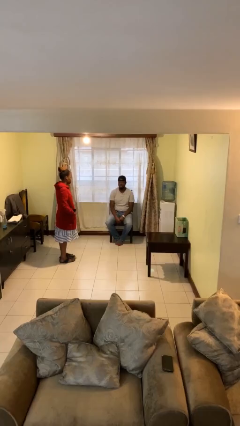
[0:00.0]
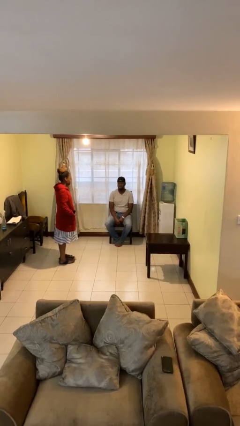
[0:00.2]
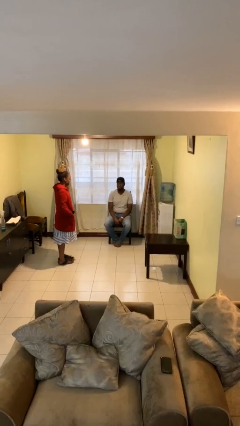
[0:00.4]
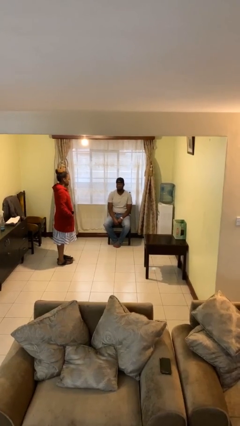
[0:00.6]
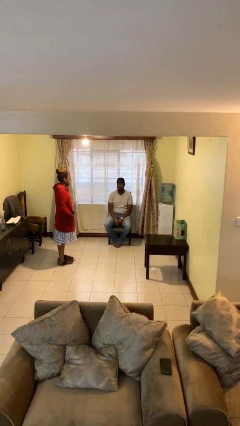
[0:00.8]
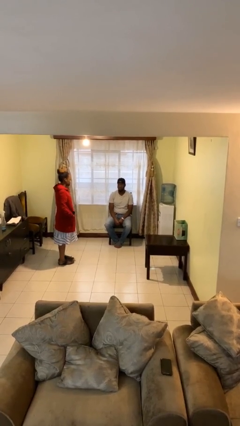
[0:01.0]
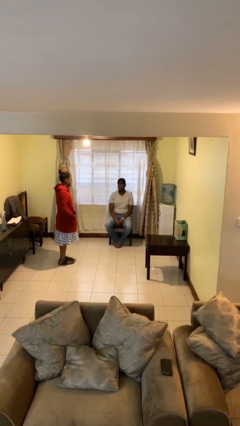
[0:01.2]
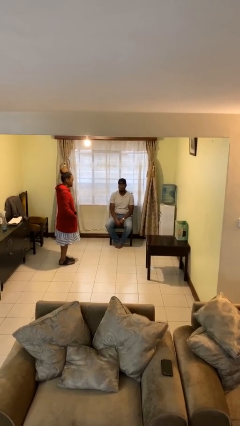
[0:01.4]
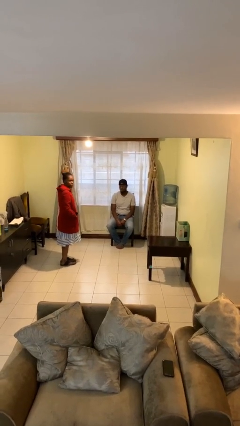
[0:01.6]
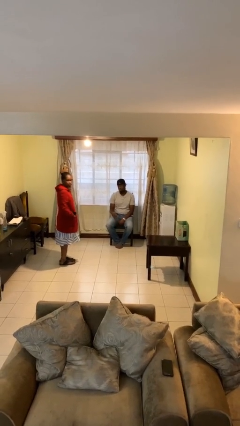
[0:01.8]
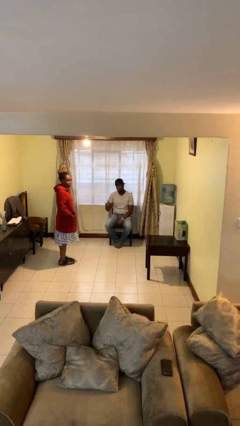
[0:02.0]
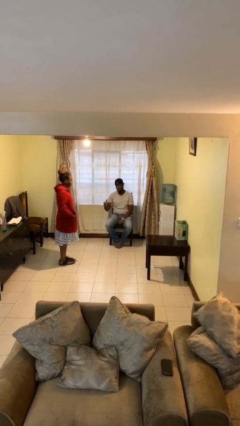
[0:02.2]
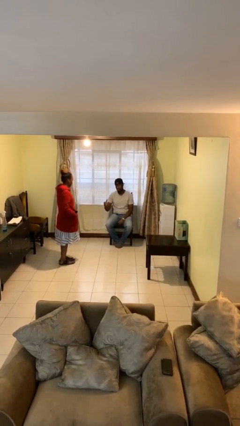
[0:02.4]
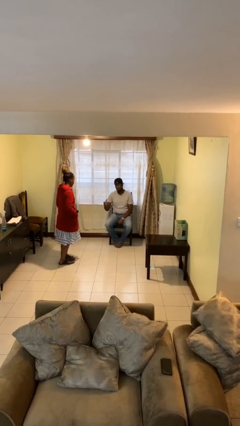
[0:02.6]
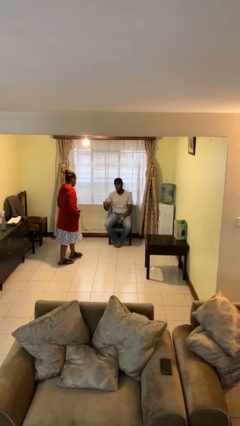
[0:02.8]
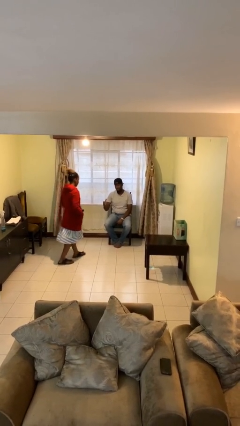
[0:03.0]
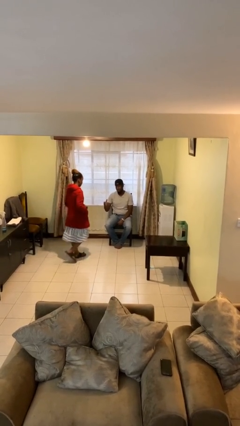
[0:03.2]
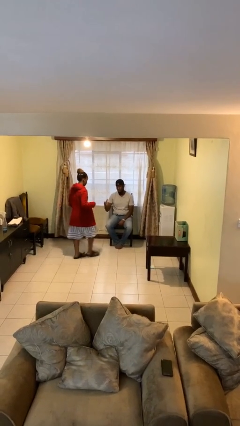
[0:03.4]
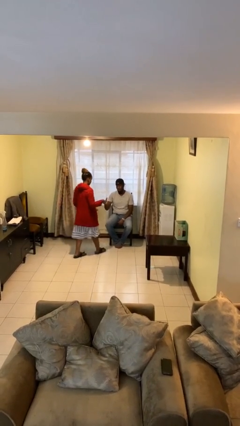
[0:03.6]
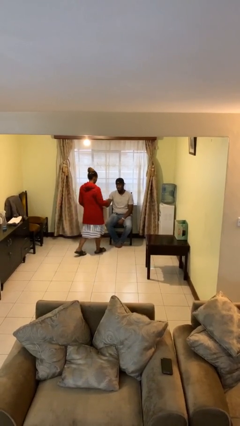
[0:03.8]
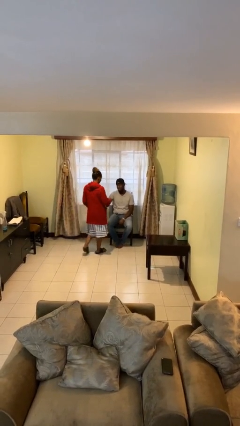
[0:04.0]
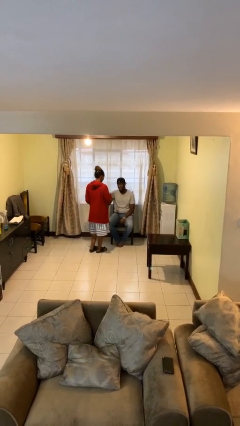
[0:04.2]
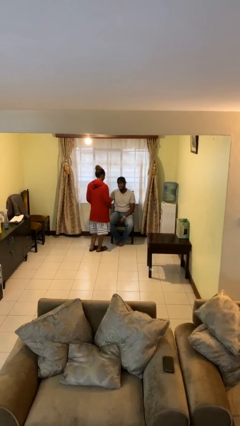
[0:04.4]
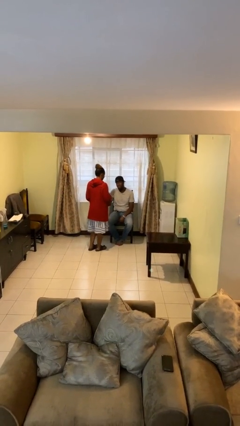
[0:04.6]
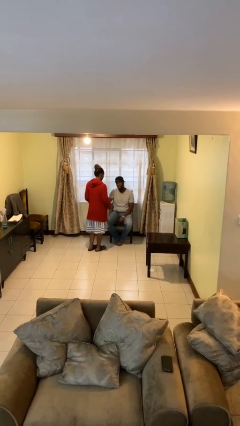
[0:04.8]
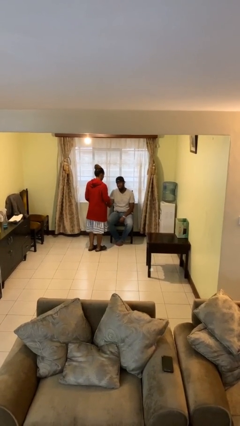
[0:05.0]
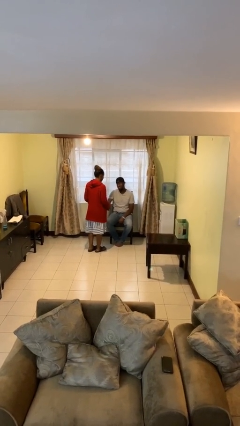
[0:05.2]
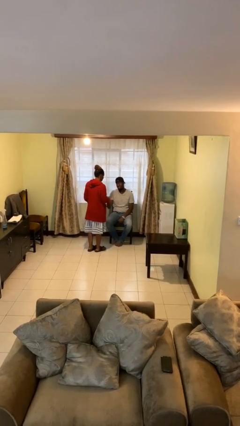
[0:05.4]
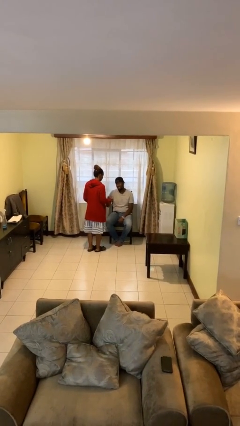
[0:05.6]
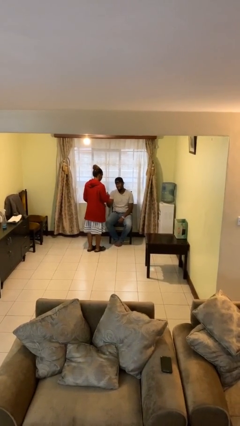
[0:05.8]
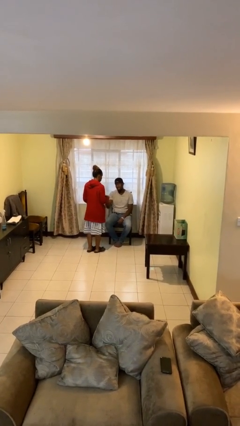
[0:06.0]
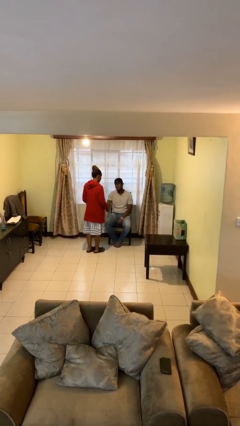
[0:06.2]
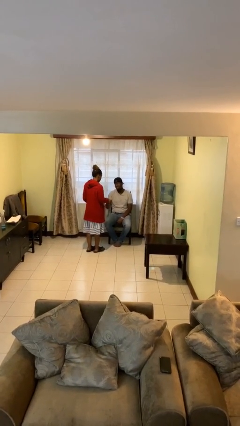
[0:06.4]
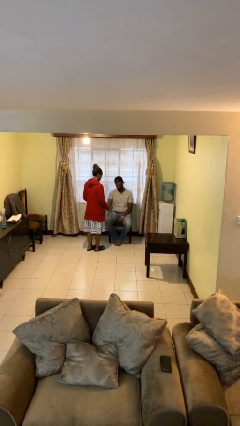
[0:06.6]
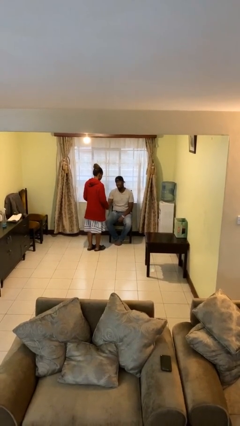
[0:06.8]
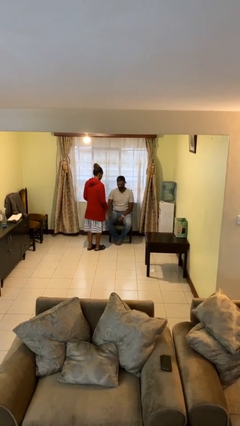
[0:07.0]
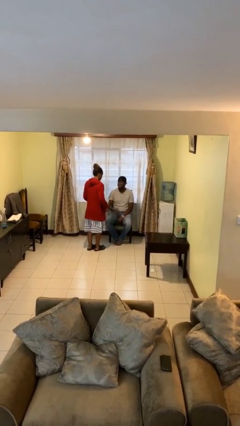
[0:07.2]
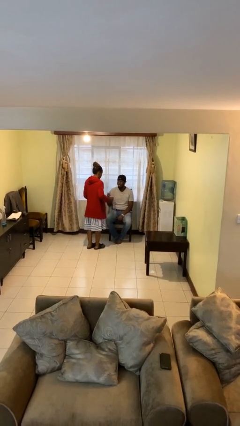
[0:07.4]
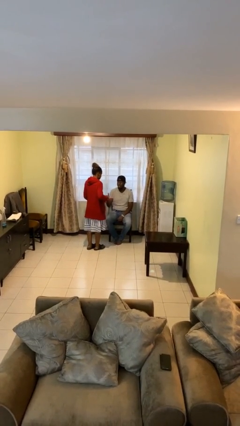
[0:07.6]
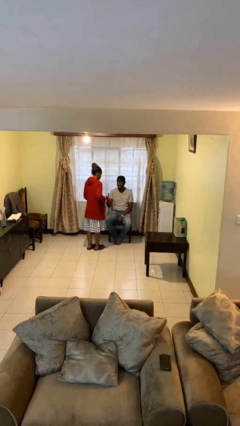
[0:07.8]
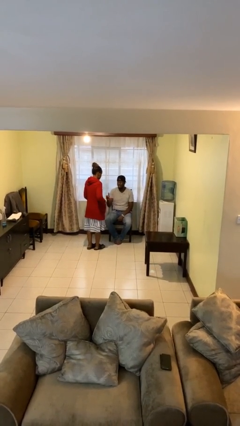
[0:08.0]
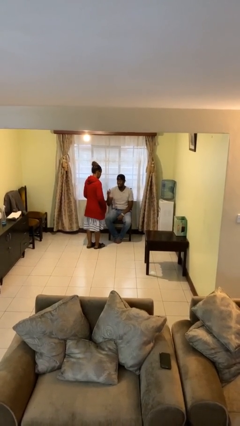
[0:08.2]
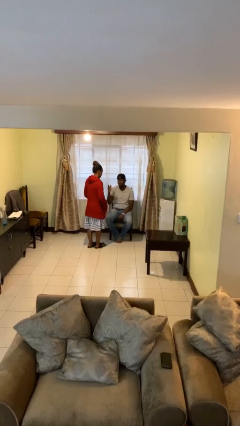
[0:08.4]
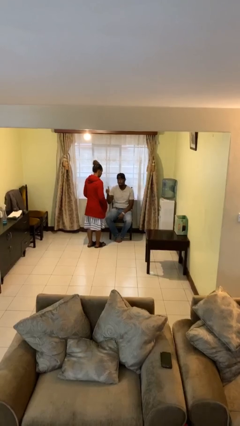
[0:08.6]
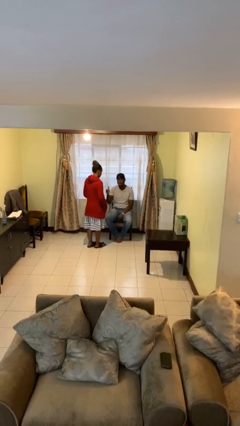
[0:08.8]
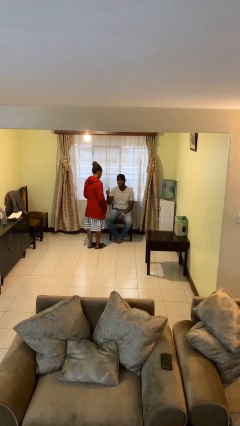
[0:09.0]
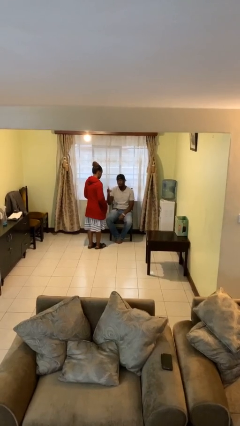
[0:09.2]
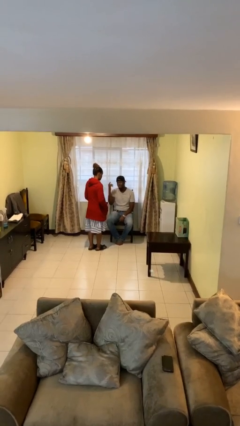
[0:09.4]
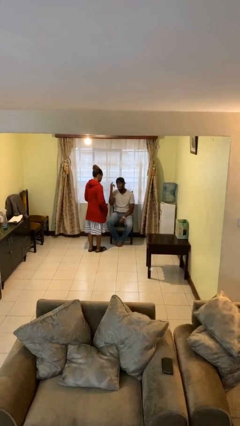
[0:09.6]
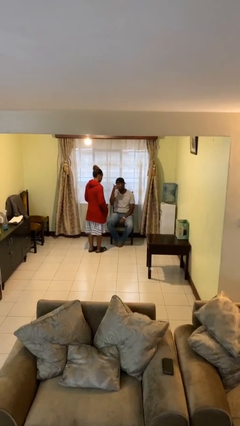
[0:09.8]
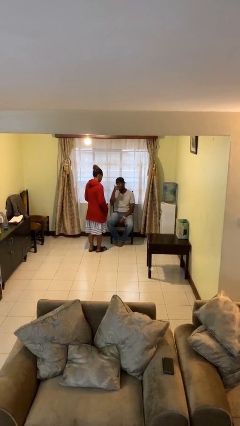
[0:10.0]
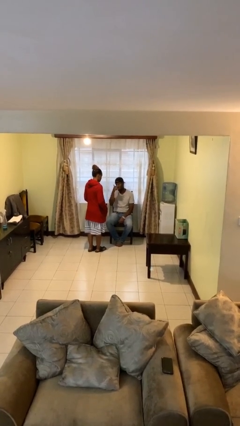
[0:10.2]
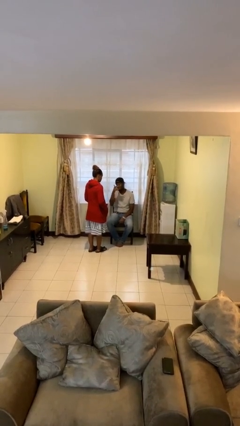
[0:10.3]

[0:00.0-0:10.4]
person shakes hand

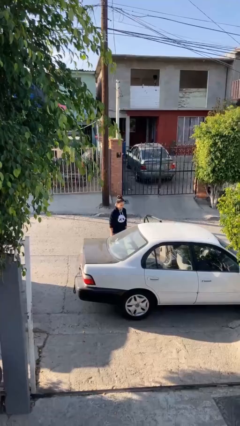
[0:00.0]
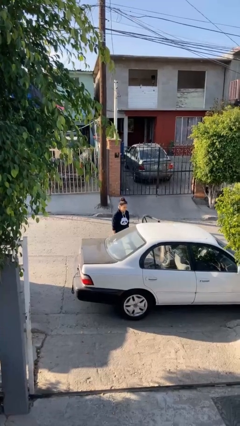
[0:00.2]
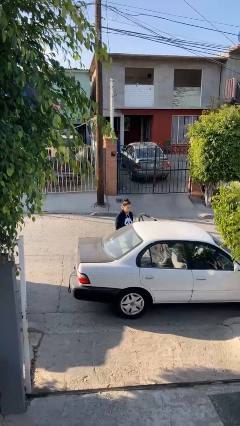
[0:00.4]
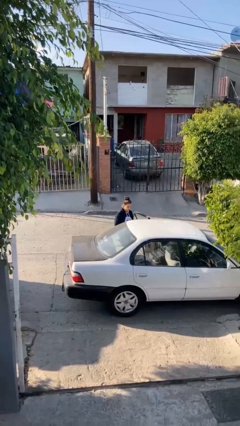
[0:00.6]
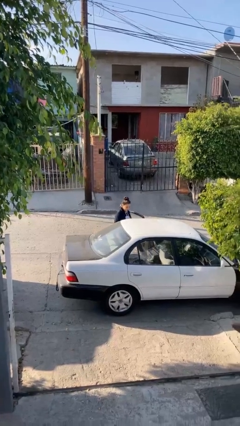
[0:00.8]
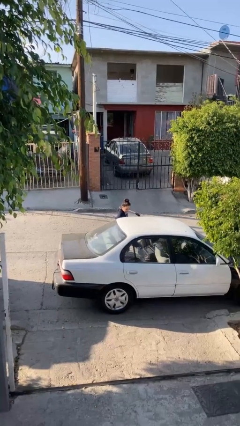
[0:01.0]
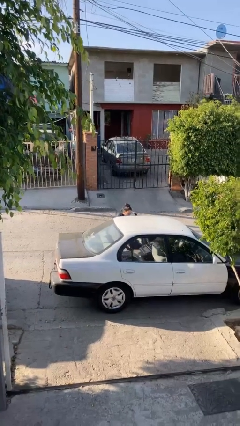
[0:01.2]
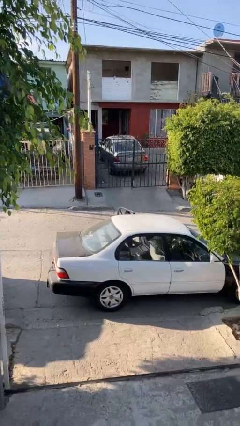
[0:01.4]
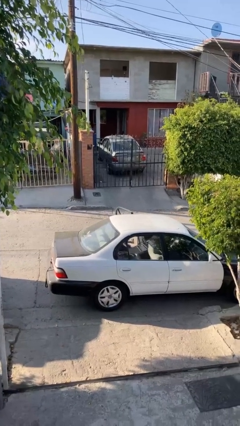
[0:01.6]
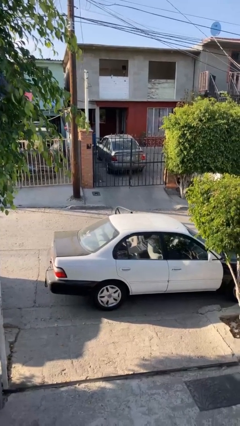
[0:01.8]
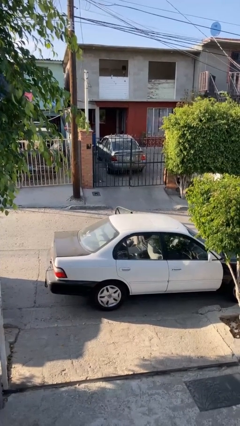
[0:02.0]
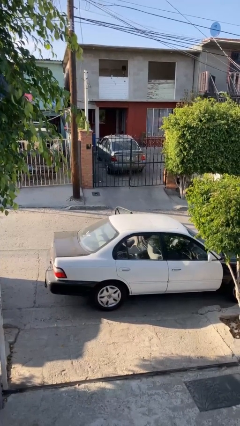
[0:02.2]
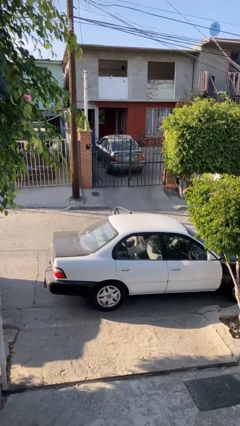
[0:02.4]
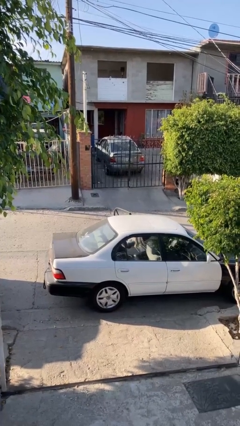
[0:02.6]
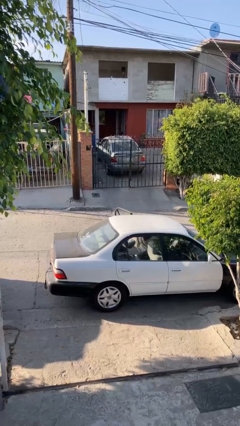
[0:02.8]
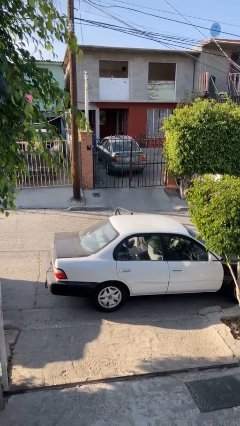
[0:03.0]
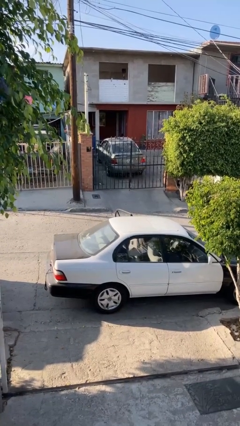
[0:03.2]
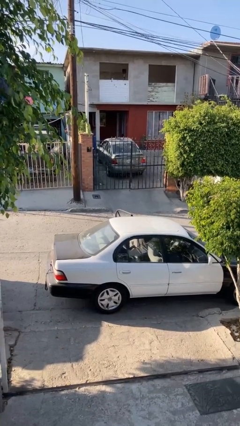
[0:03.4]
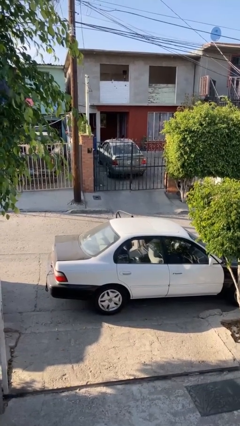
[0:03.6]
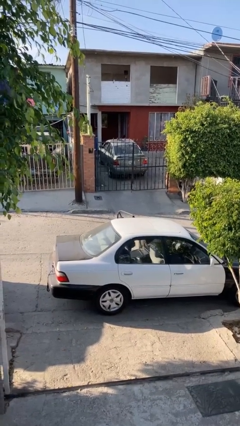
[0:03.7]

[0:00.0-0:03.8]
person enters car

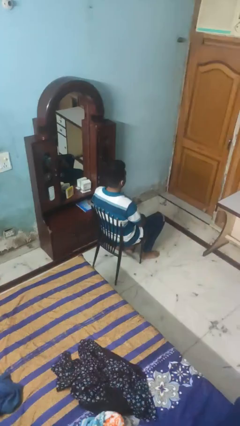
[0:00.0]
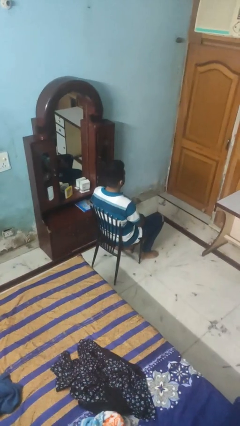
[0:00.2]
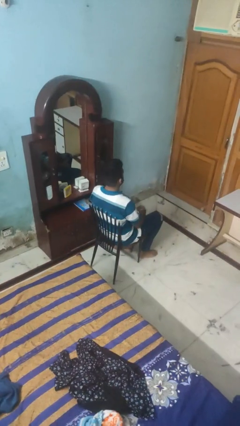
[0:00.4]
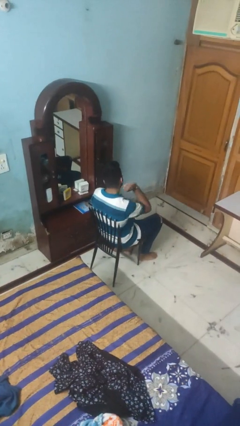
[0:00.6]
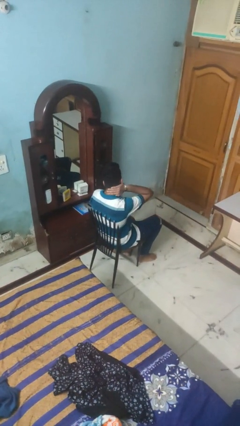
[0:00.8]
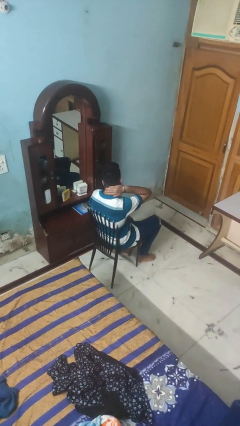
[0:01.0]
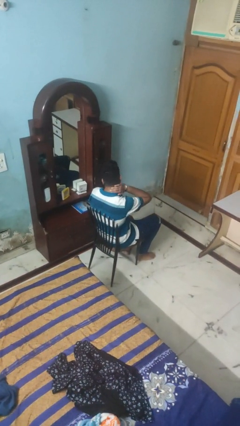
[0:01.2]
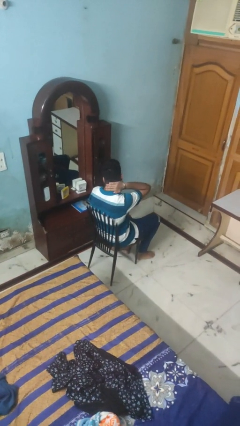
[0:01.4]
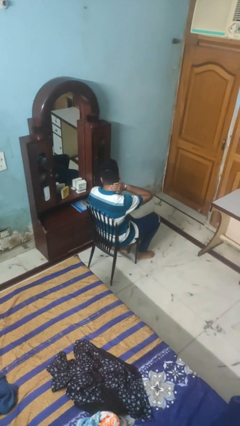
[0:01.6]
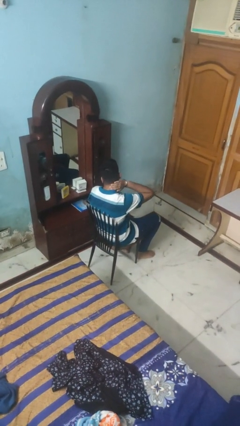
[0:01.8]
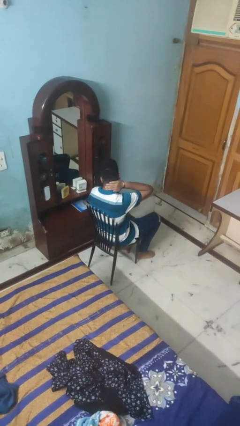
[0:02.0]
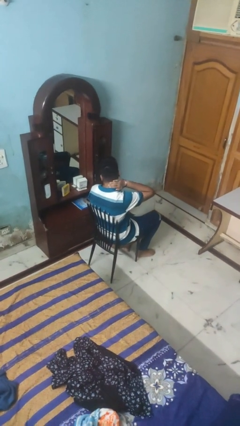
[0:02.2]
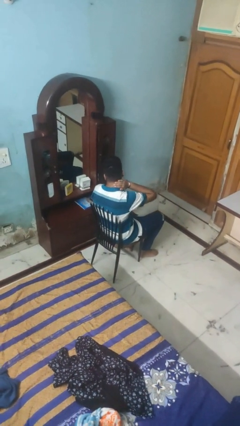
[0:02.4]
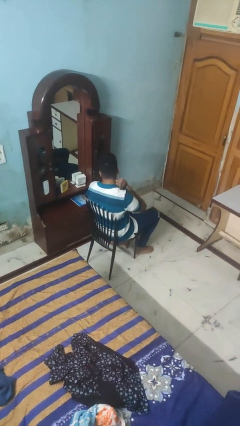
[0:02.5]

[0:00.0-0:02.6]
person rubs neck

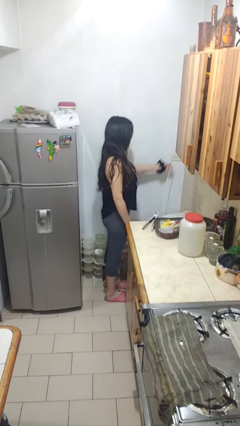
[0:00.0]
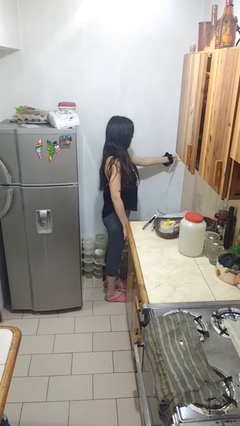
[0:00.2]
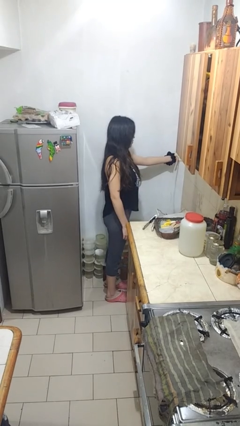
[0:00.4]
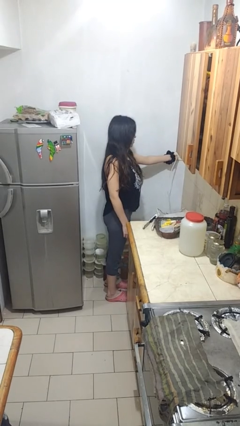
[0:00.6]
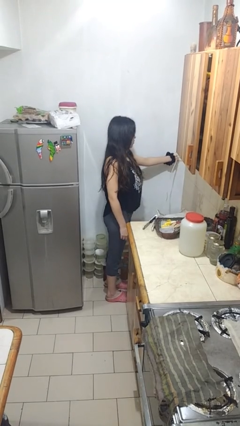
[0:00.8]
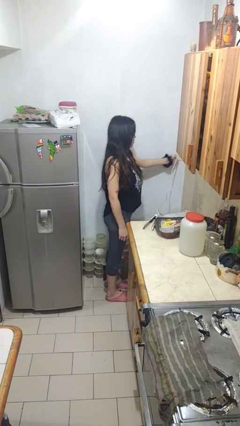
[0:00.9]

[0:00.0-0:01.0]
person plugs into electrical socket
